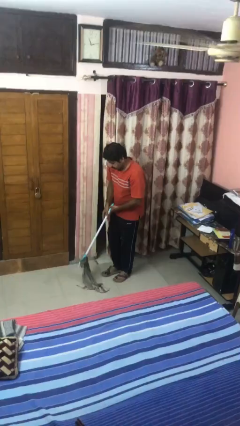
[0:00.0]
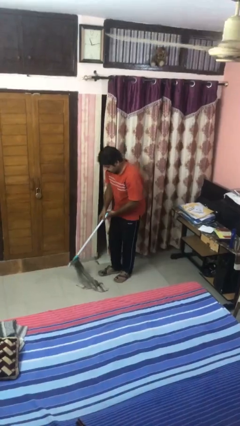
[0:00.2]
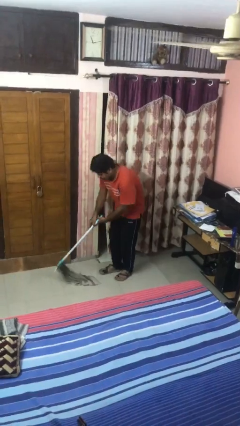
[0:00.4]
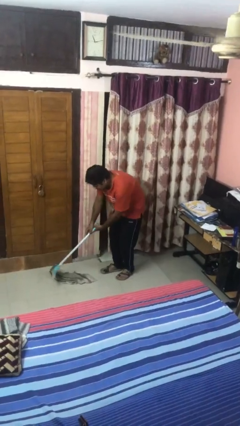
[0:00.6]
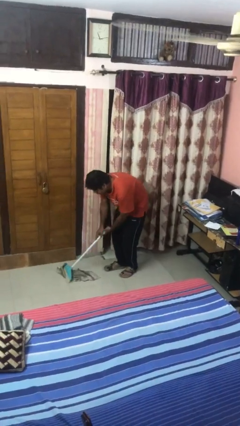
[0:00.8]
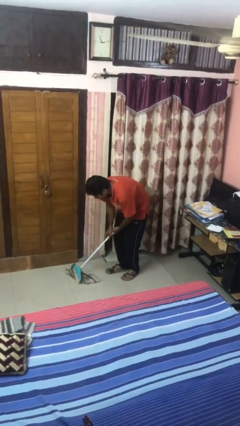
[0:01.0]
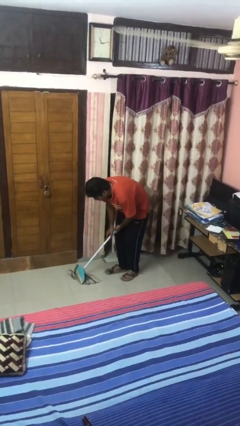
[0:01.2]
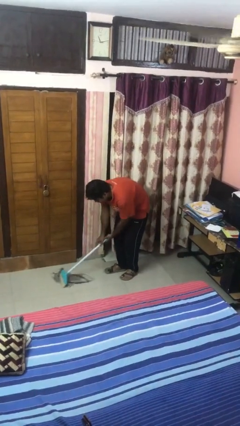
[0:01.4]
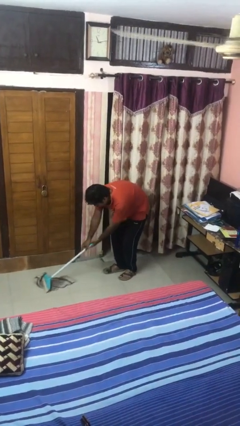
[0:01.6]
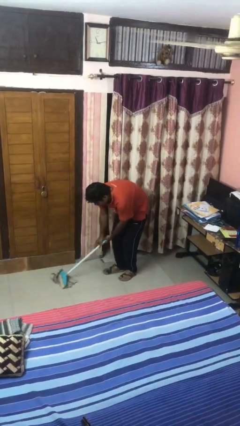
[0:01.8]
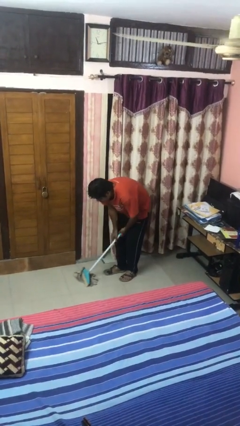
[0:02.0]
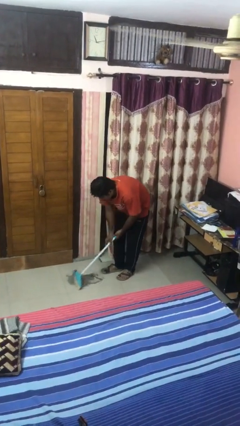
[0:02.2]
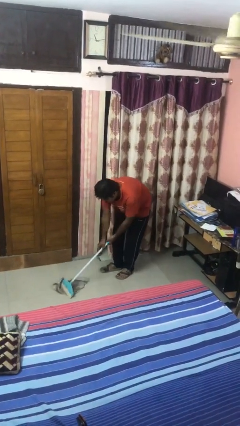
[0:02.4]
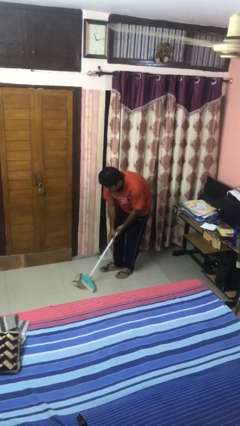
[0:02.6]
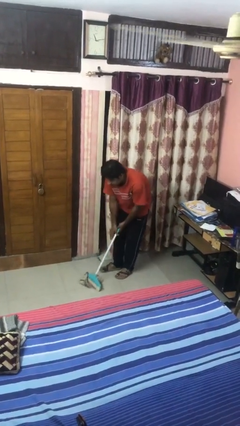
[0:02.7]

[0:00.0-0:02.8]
person mops

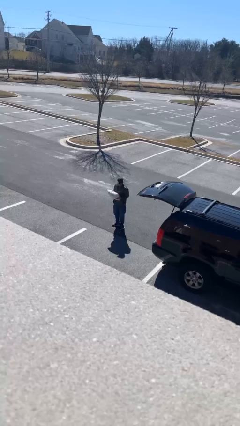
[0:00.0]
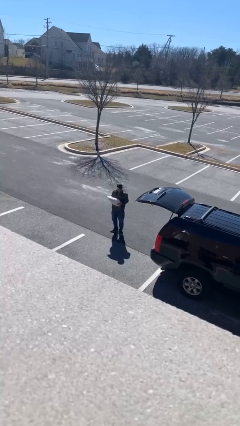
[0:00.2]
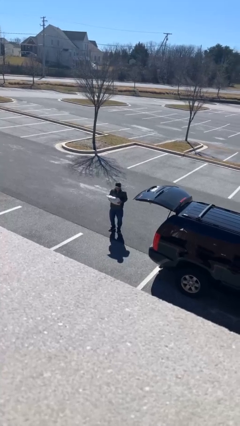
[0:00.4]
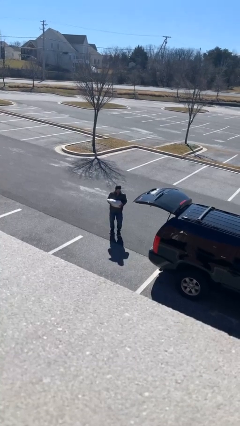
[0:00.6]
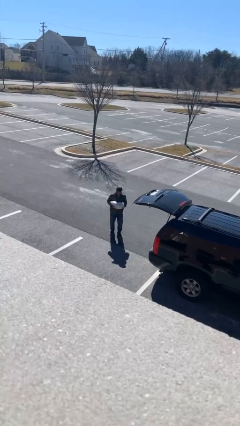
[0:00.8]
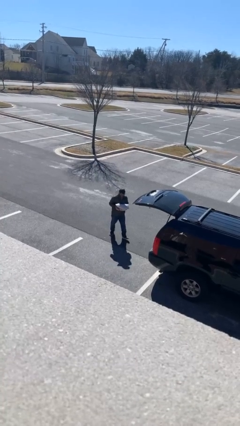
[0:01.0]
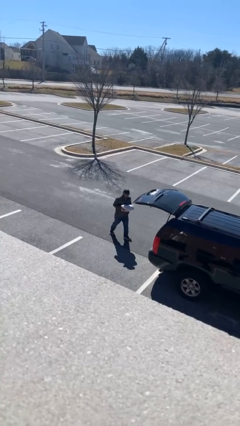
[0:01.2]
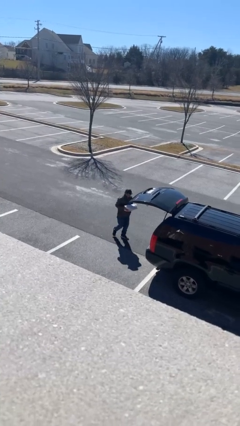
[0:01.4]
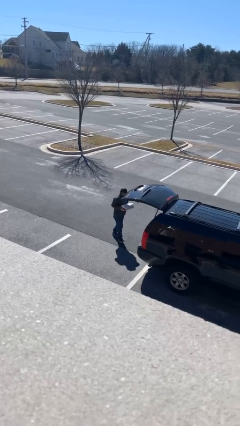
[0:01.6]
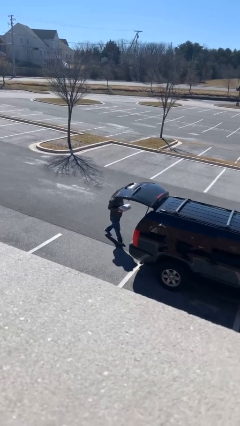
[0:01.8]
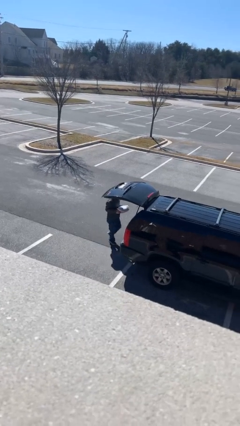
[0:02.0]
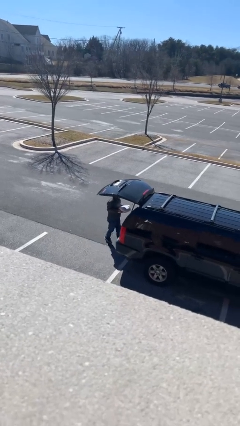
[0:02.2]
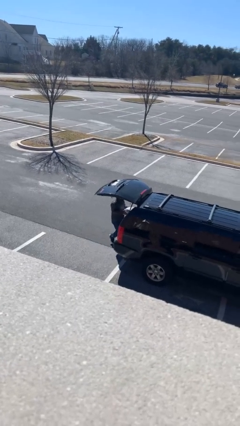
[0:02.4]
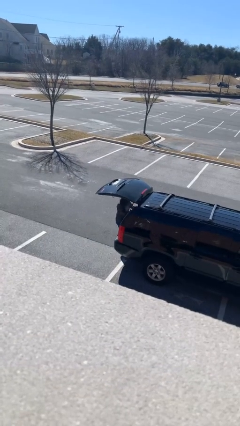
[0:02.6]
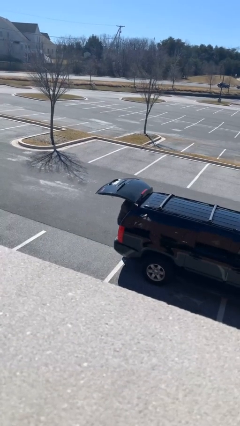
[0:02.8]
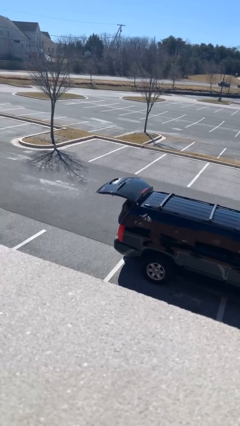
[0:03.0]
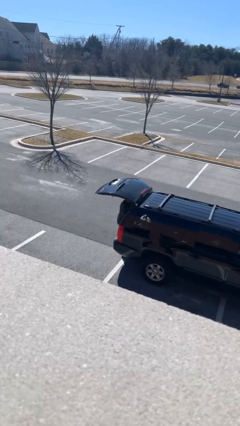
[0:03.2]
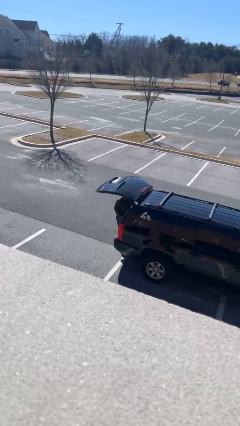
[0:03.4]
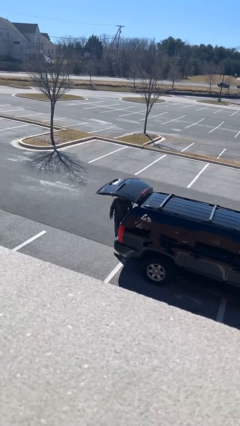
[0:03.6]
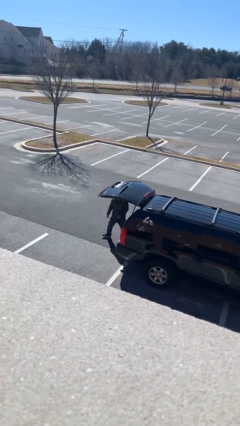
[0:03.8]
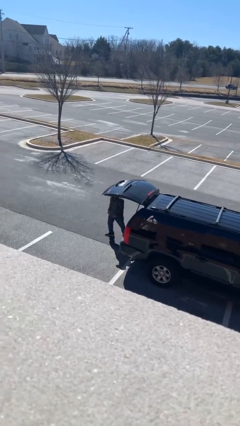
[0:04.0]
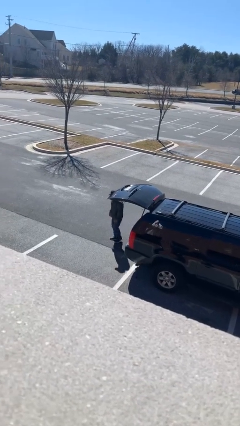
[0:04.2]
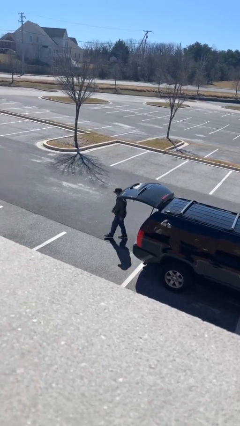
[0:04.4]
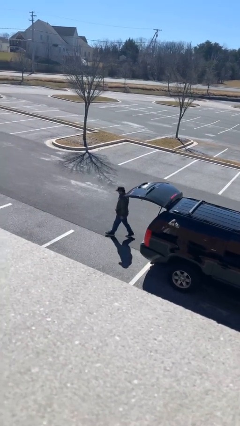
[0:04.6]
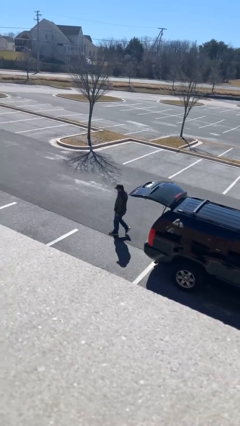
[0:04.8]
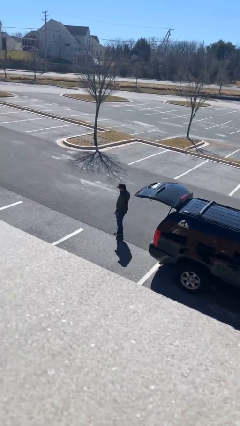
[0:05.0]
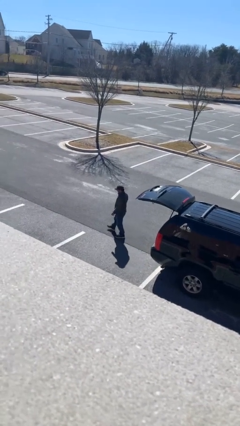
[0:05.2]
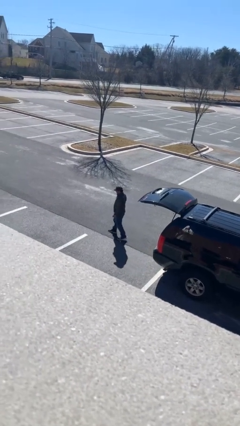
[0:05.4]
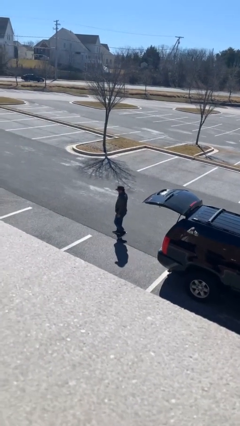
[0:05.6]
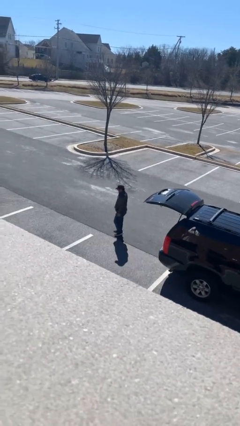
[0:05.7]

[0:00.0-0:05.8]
person loads car

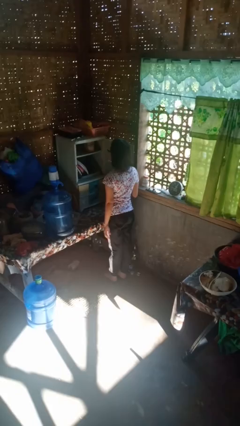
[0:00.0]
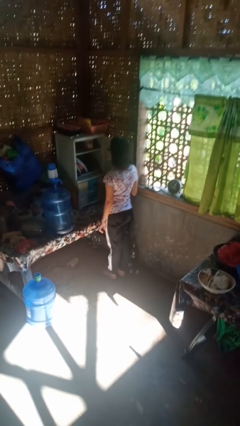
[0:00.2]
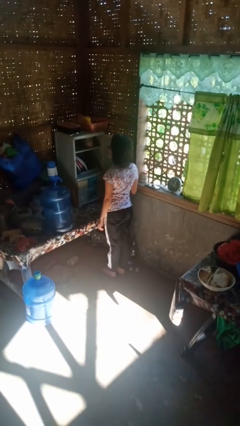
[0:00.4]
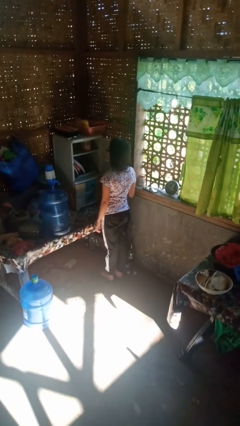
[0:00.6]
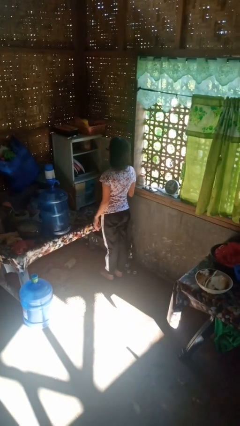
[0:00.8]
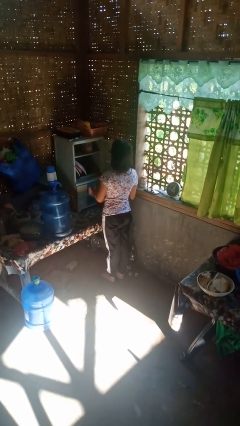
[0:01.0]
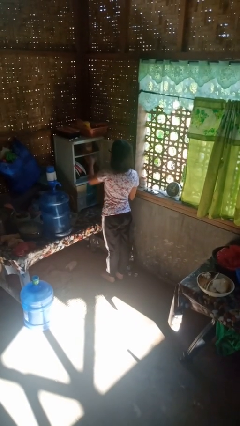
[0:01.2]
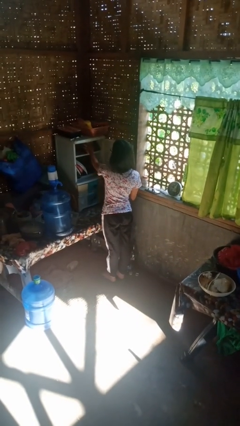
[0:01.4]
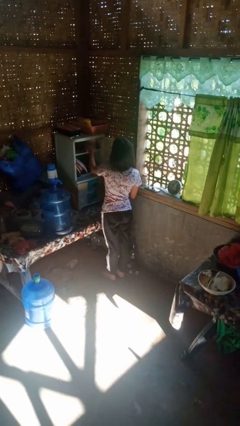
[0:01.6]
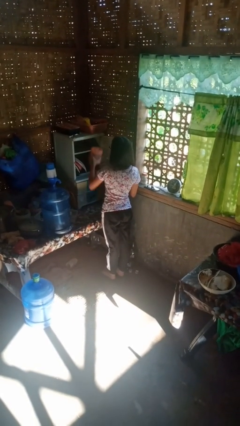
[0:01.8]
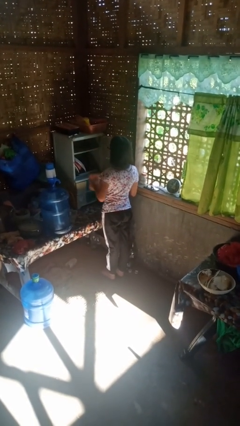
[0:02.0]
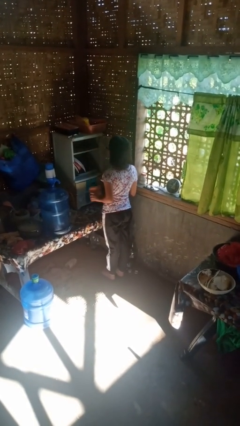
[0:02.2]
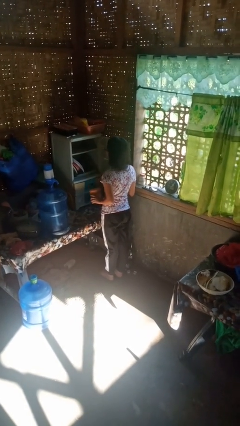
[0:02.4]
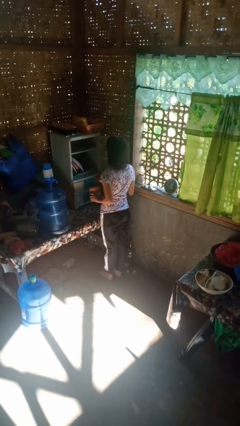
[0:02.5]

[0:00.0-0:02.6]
person picks up object from cabinet

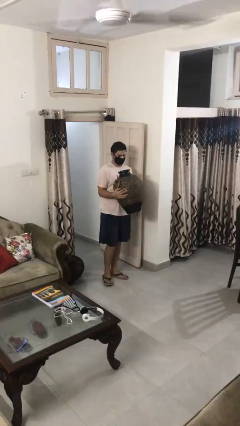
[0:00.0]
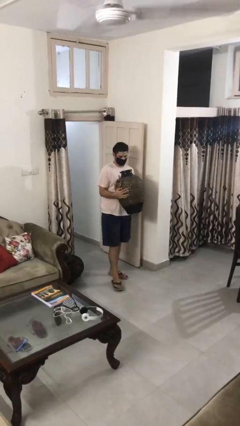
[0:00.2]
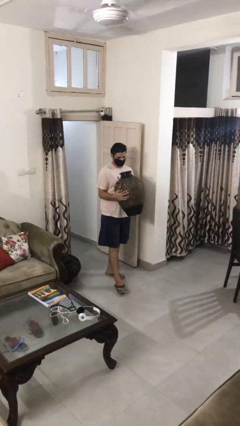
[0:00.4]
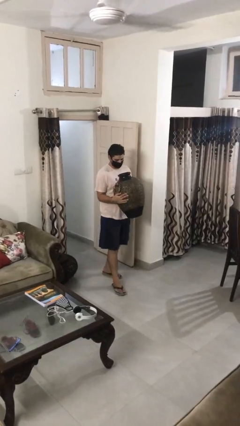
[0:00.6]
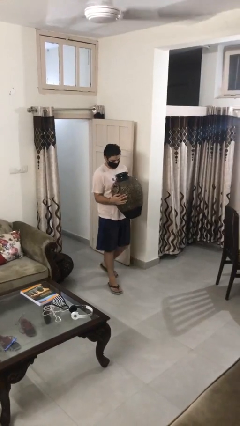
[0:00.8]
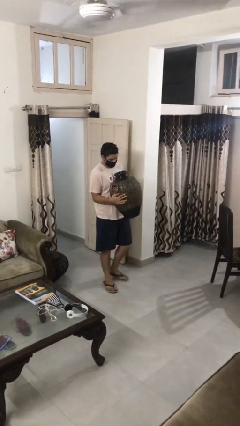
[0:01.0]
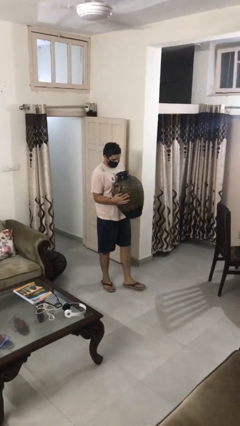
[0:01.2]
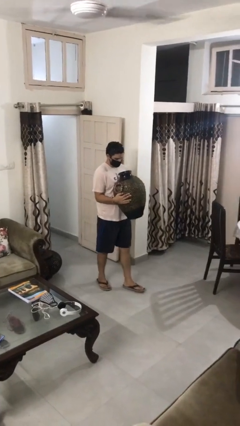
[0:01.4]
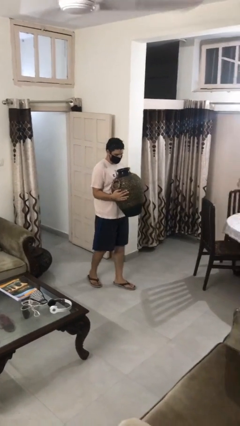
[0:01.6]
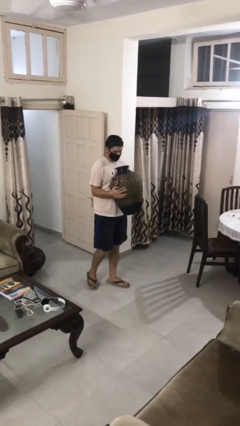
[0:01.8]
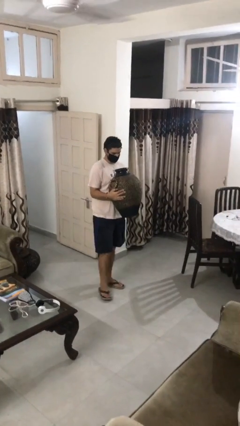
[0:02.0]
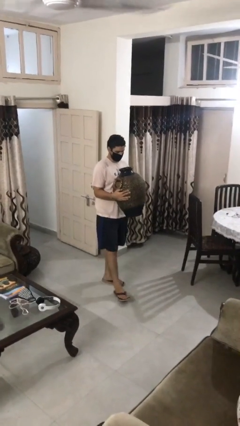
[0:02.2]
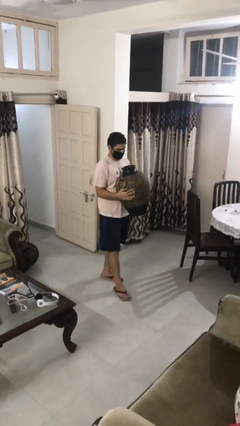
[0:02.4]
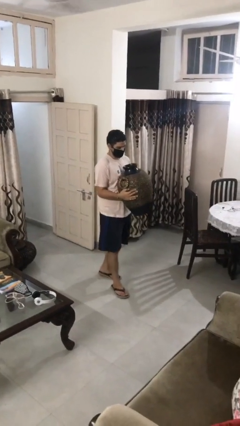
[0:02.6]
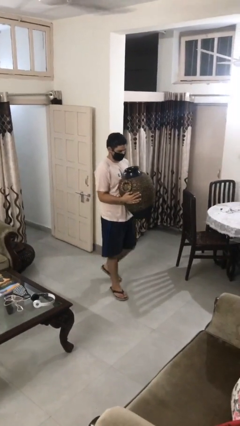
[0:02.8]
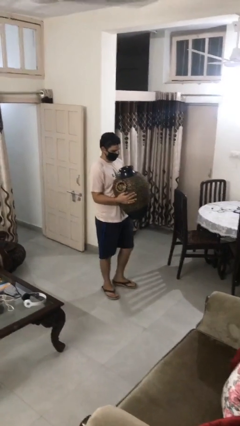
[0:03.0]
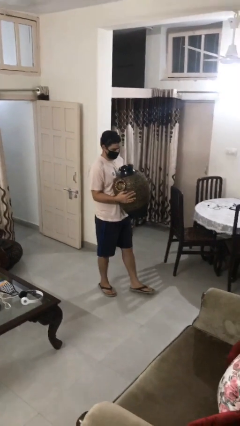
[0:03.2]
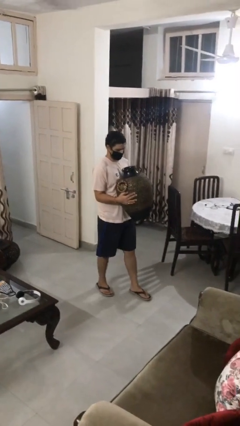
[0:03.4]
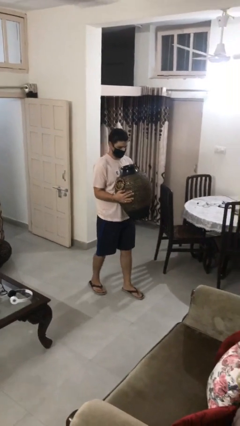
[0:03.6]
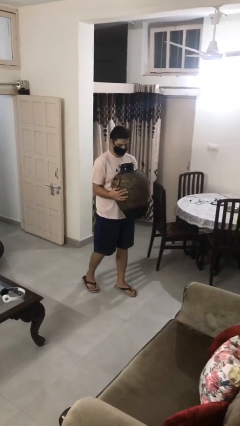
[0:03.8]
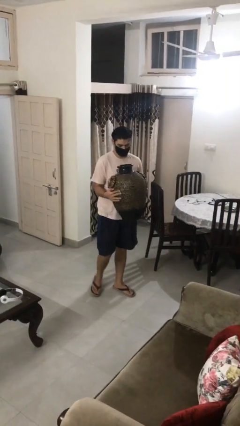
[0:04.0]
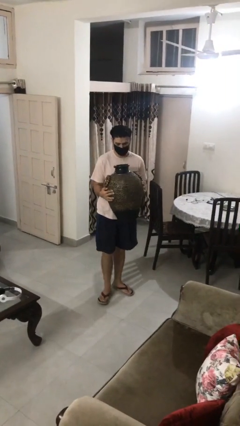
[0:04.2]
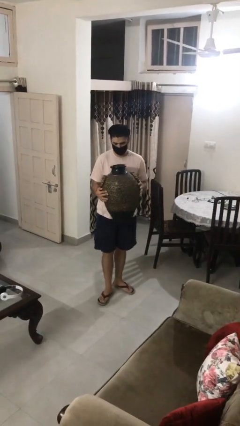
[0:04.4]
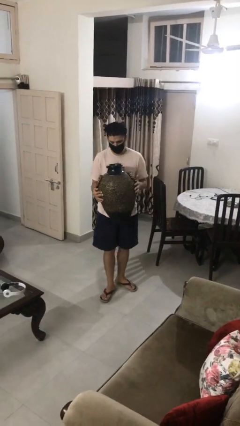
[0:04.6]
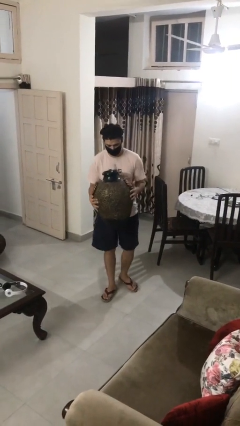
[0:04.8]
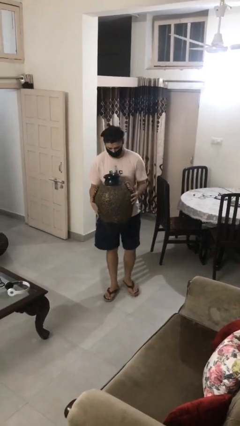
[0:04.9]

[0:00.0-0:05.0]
person carries heavy object

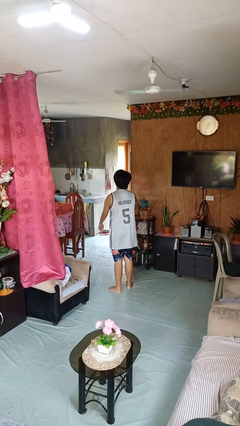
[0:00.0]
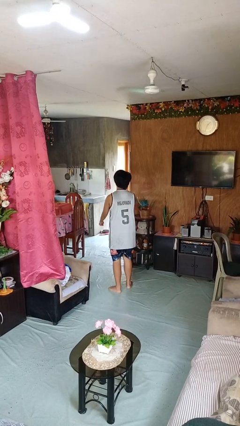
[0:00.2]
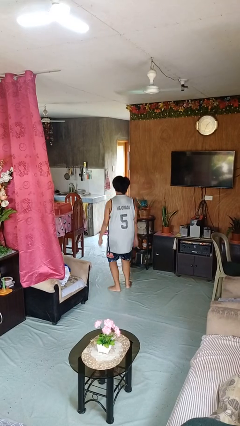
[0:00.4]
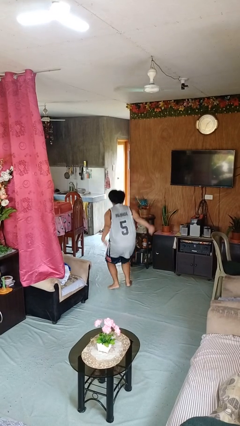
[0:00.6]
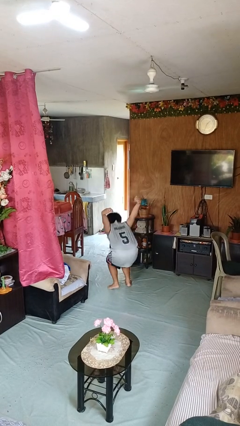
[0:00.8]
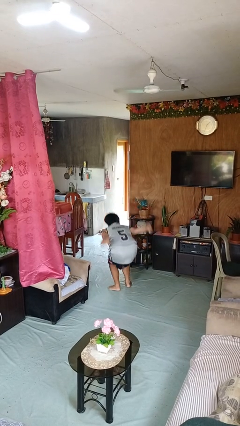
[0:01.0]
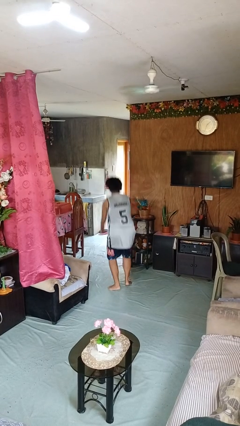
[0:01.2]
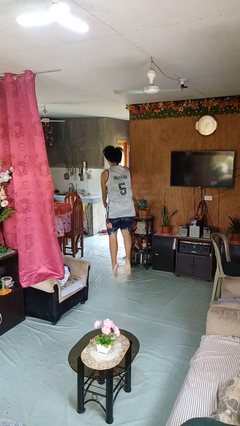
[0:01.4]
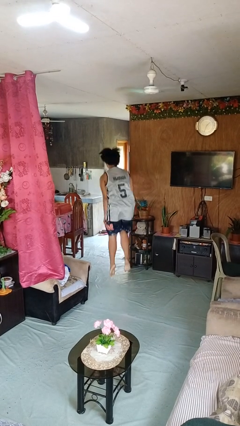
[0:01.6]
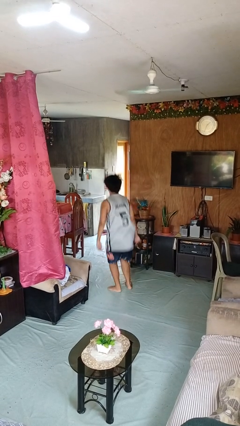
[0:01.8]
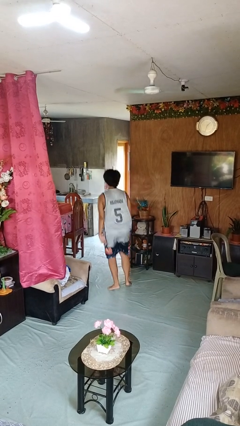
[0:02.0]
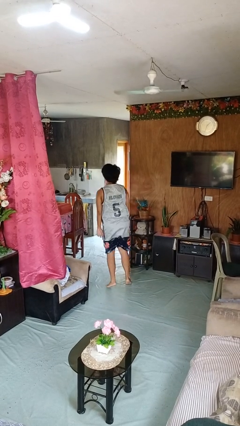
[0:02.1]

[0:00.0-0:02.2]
person jumps
